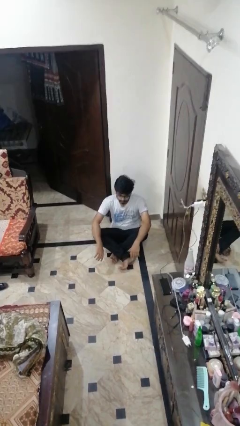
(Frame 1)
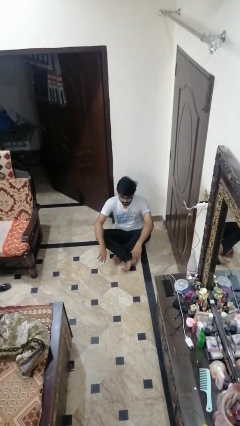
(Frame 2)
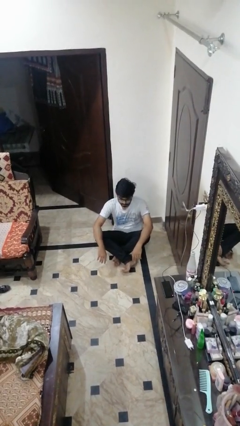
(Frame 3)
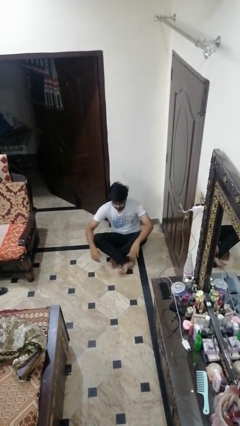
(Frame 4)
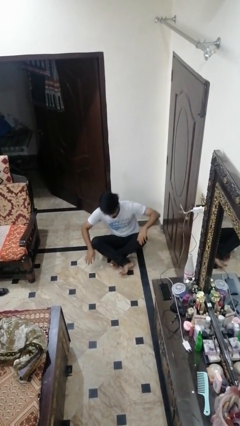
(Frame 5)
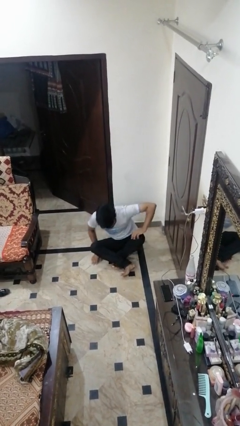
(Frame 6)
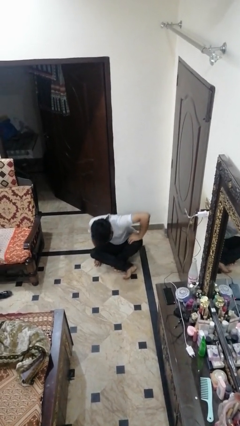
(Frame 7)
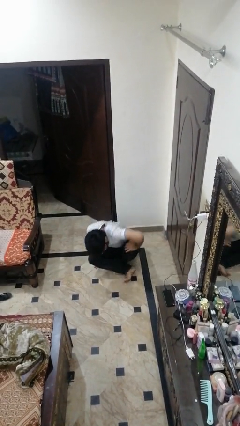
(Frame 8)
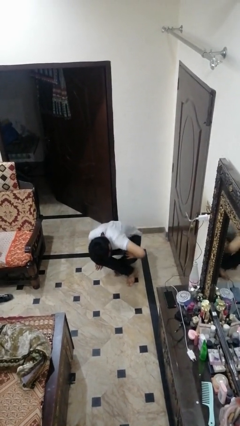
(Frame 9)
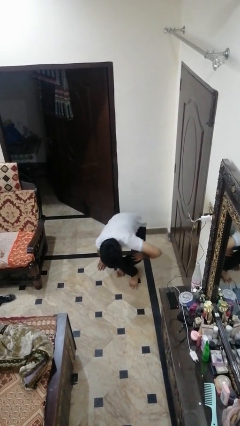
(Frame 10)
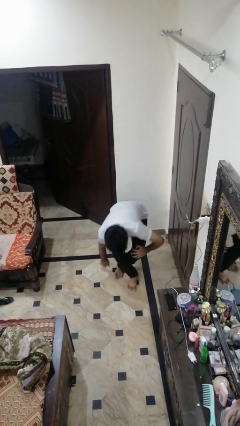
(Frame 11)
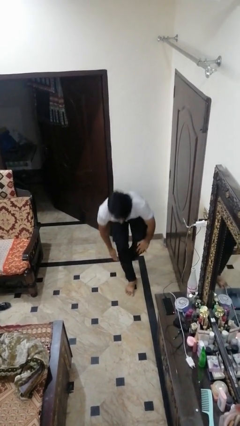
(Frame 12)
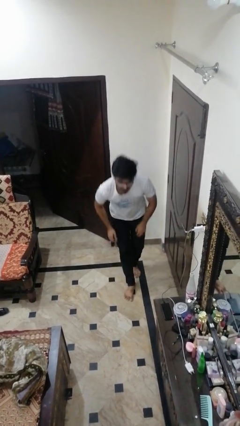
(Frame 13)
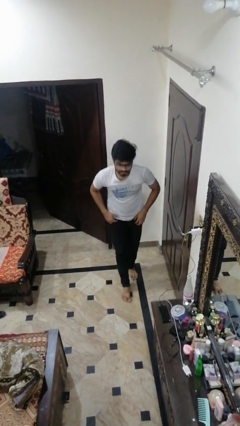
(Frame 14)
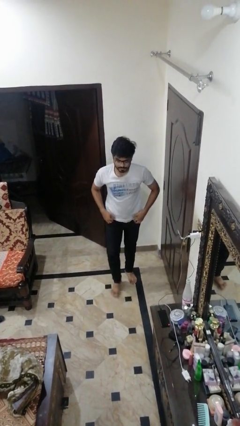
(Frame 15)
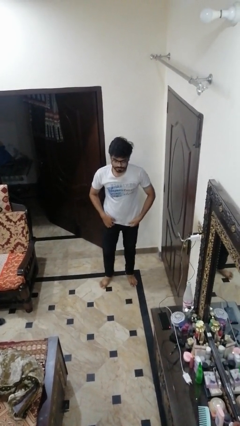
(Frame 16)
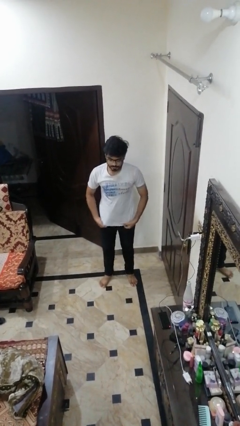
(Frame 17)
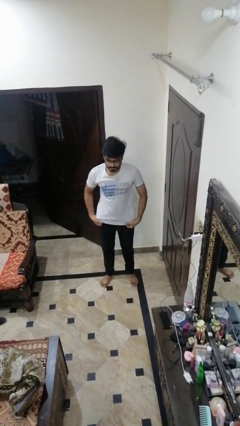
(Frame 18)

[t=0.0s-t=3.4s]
person stands up from floor

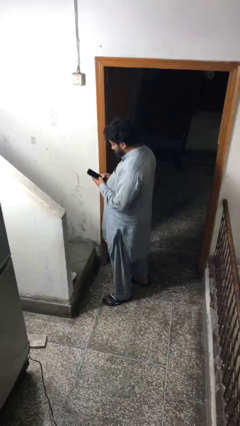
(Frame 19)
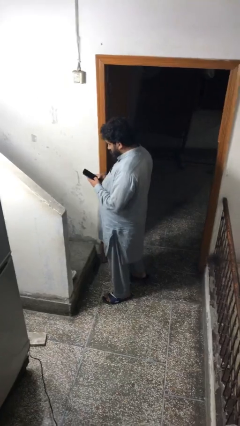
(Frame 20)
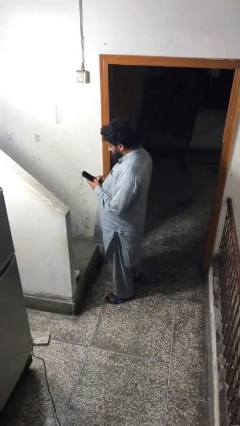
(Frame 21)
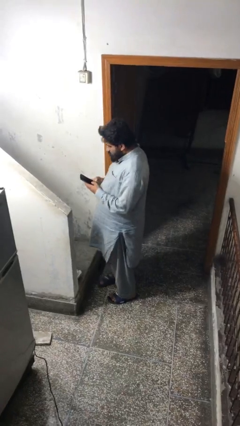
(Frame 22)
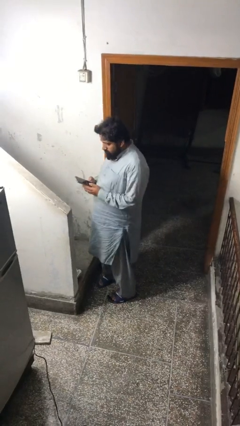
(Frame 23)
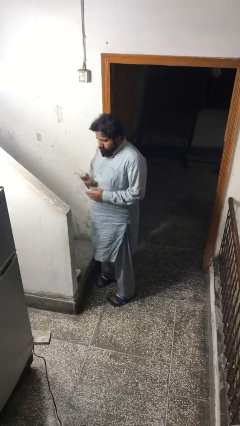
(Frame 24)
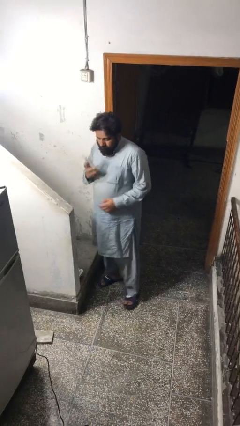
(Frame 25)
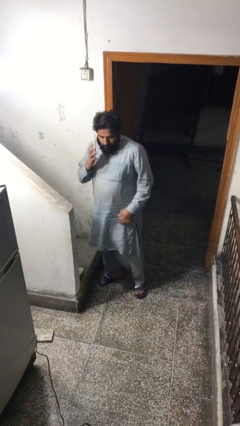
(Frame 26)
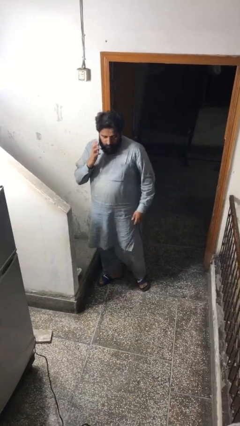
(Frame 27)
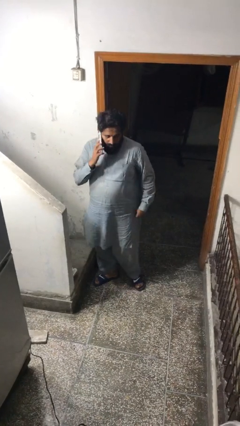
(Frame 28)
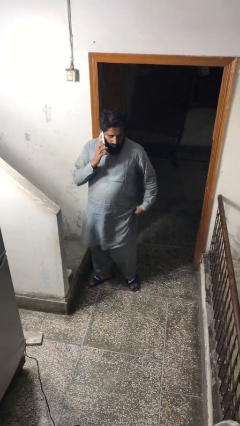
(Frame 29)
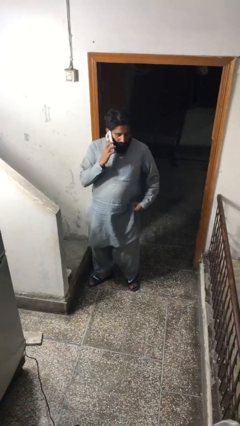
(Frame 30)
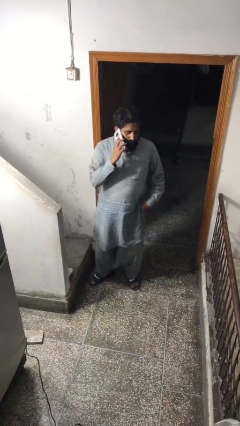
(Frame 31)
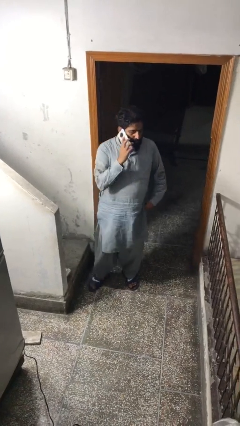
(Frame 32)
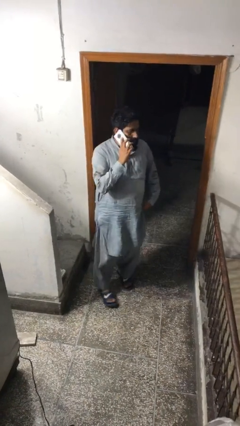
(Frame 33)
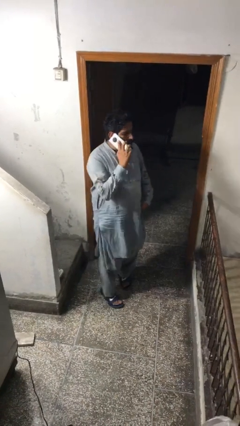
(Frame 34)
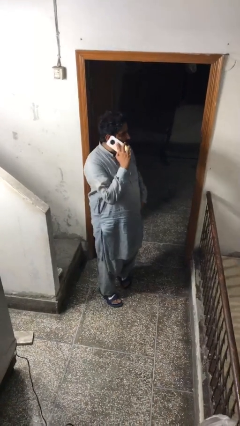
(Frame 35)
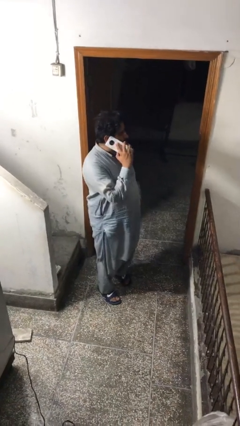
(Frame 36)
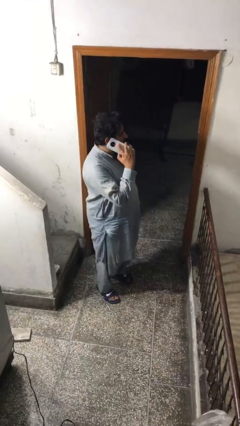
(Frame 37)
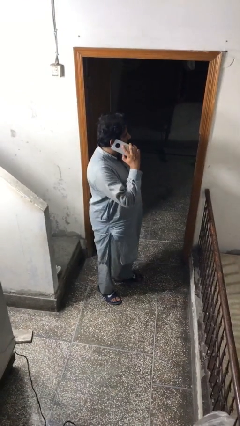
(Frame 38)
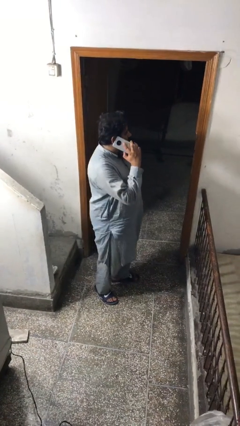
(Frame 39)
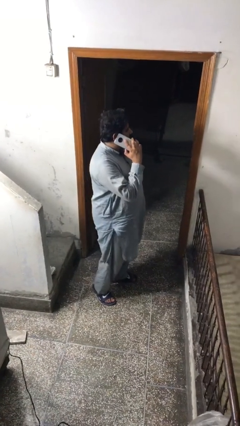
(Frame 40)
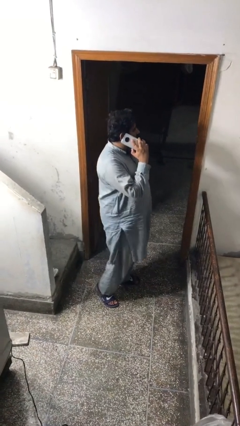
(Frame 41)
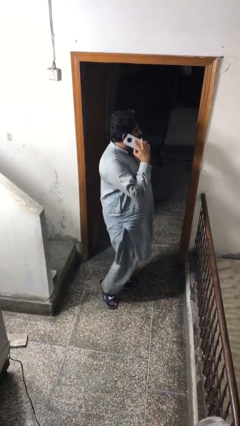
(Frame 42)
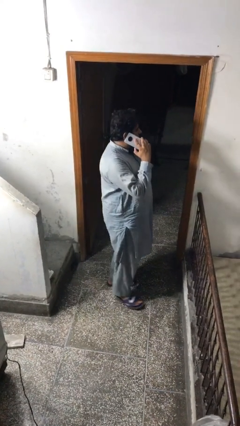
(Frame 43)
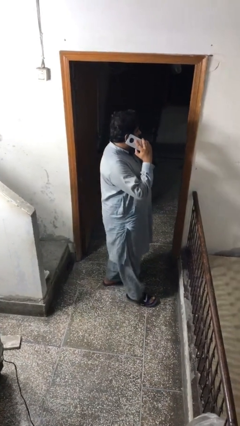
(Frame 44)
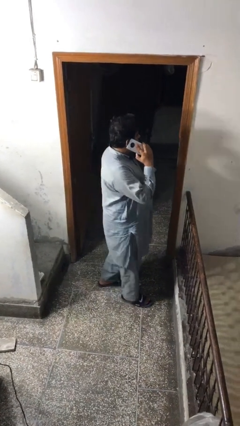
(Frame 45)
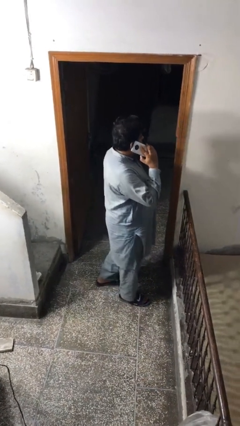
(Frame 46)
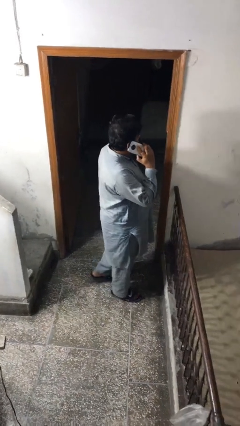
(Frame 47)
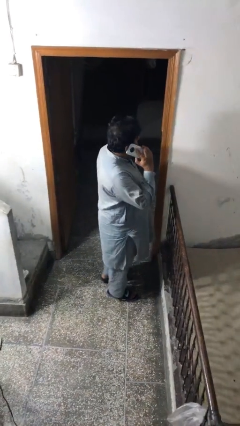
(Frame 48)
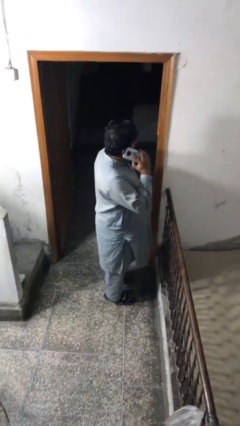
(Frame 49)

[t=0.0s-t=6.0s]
person talks on phone

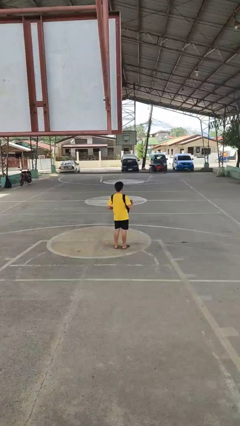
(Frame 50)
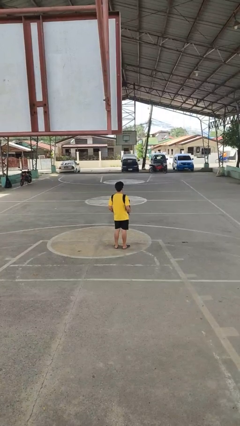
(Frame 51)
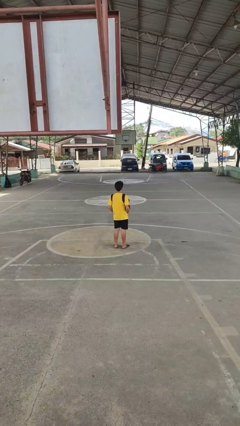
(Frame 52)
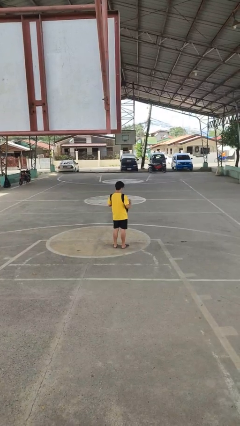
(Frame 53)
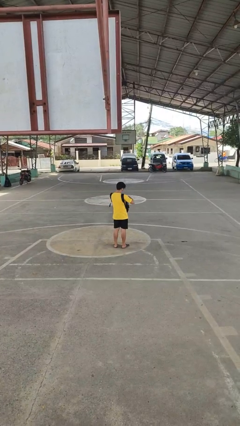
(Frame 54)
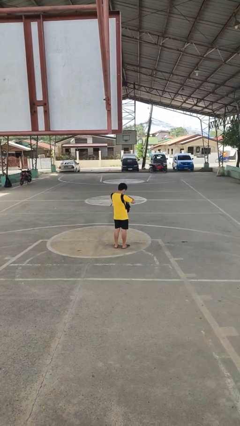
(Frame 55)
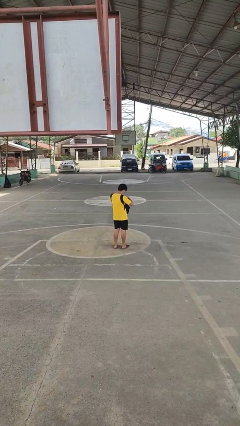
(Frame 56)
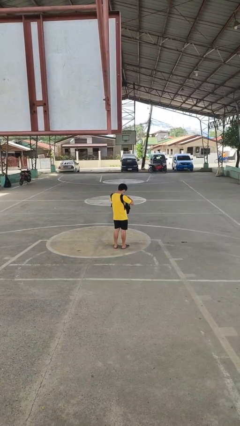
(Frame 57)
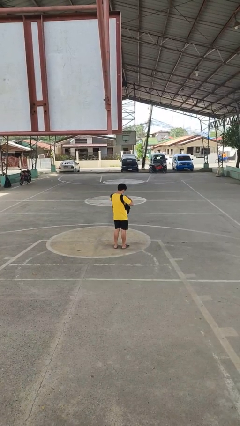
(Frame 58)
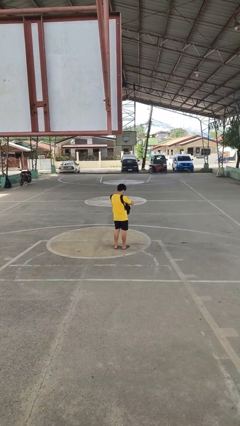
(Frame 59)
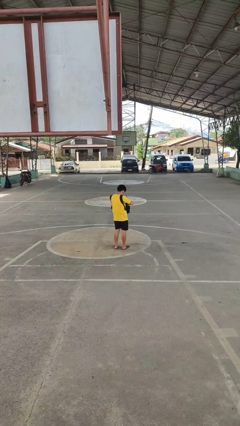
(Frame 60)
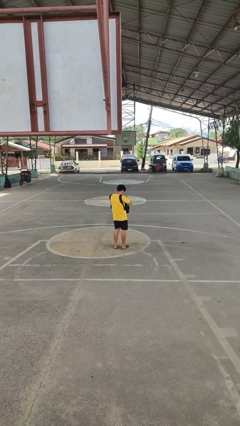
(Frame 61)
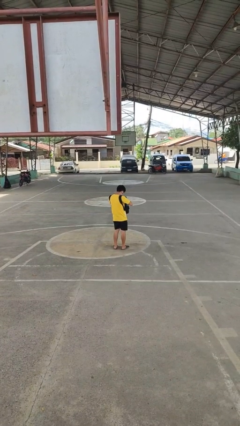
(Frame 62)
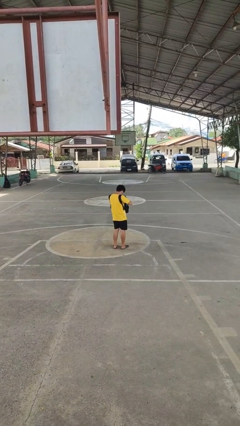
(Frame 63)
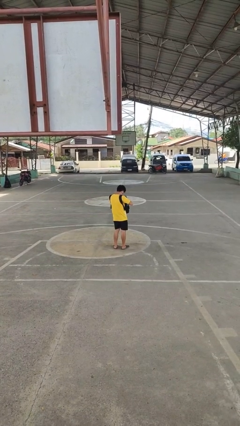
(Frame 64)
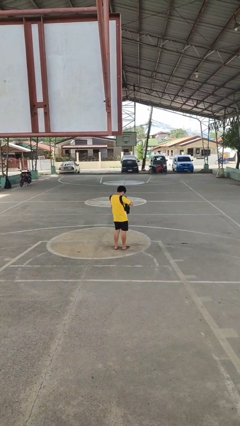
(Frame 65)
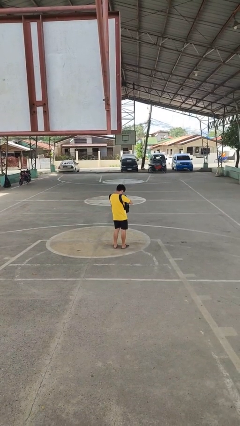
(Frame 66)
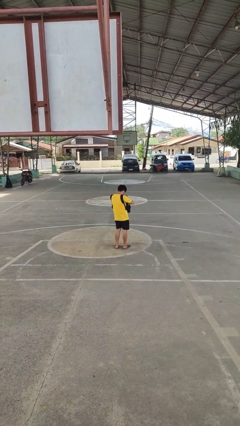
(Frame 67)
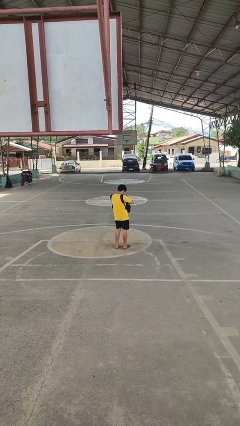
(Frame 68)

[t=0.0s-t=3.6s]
person searches in backpack

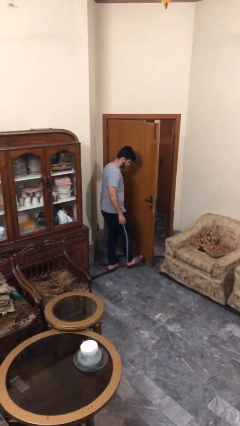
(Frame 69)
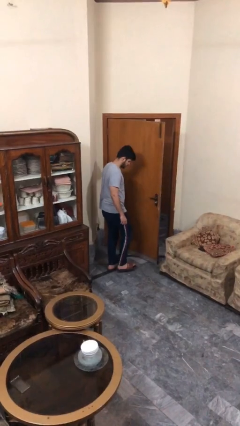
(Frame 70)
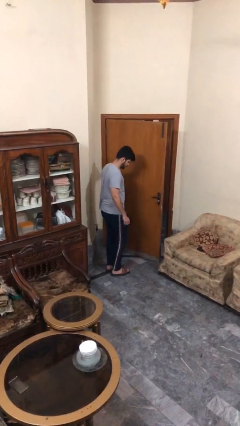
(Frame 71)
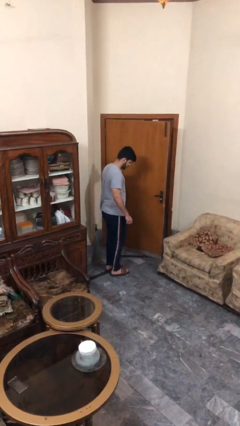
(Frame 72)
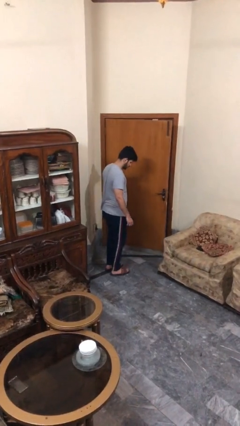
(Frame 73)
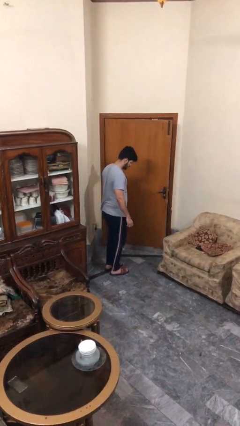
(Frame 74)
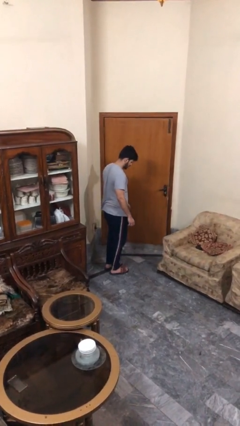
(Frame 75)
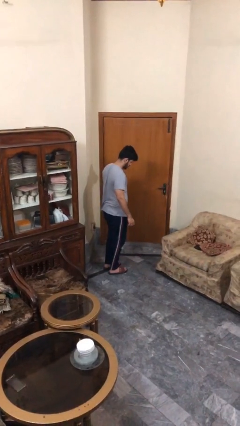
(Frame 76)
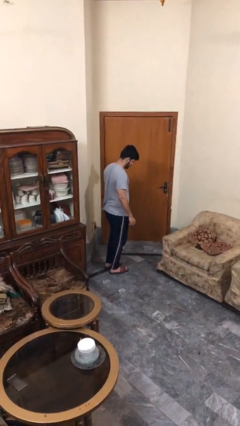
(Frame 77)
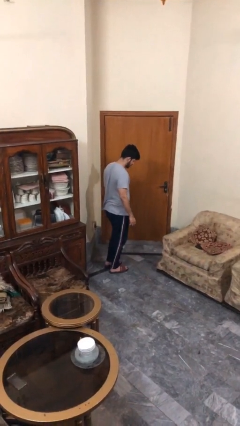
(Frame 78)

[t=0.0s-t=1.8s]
person closes door with foot

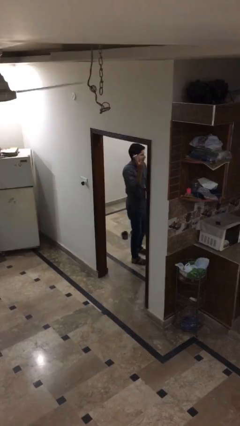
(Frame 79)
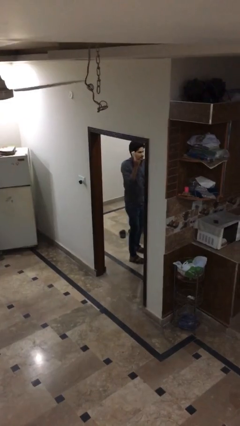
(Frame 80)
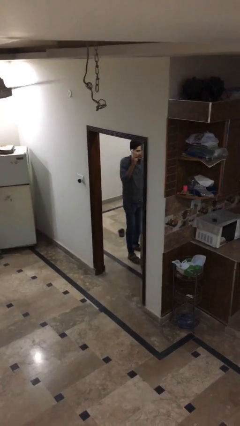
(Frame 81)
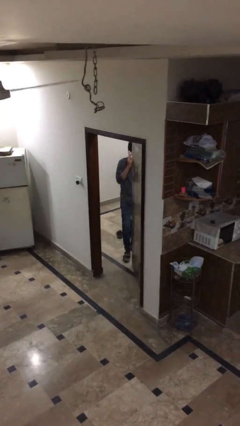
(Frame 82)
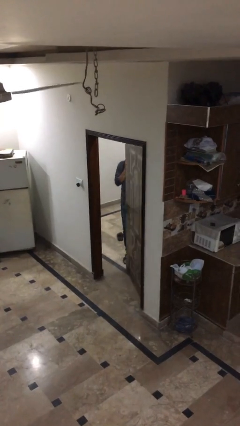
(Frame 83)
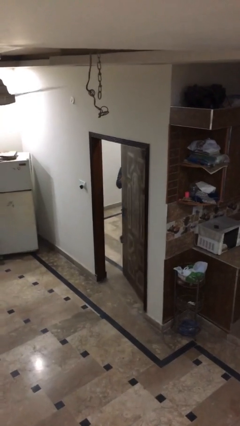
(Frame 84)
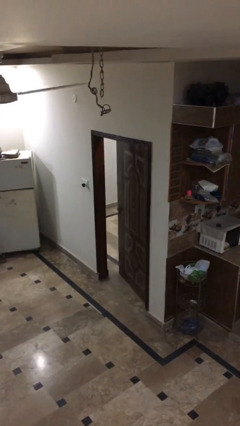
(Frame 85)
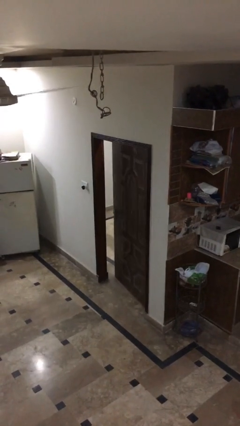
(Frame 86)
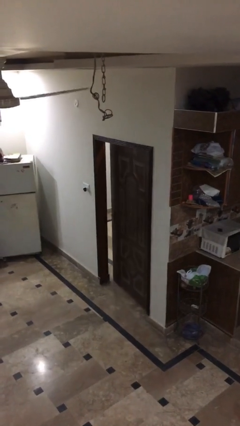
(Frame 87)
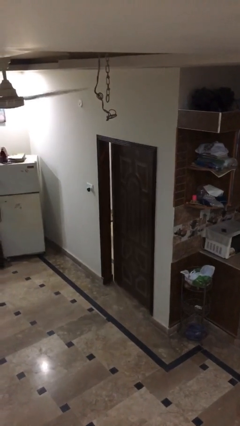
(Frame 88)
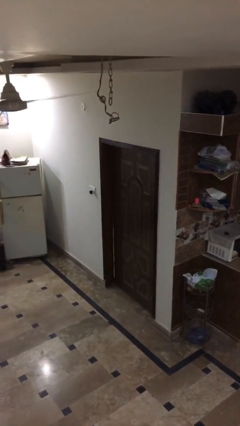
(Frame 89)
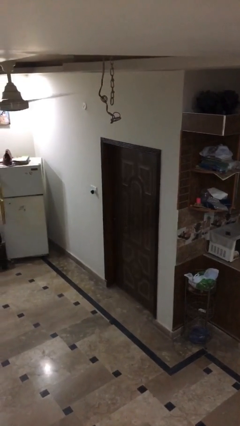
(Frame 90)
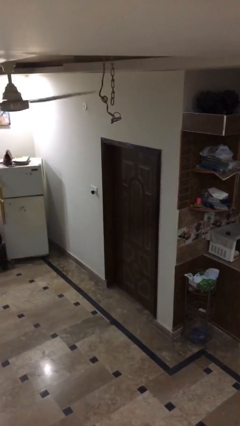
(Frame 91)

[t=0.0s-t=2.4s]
person closes facility door
